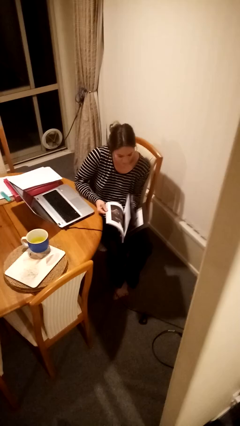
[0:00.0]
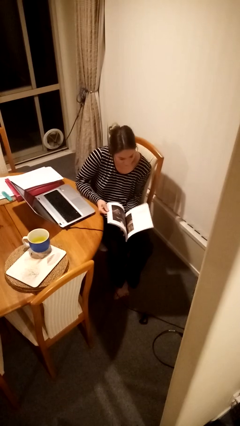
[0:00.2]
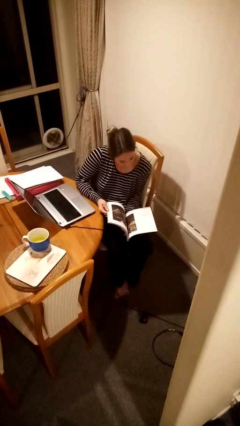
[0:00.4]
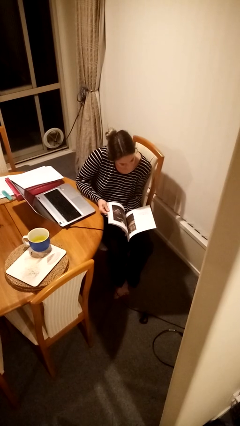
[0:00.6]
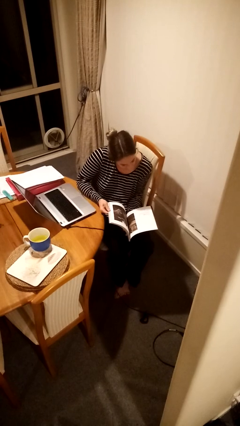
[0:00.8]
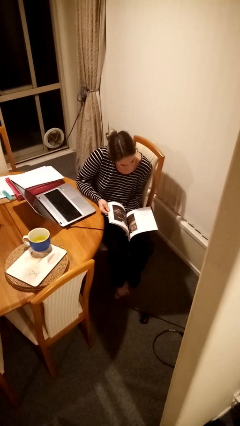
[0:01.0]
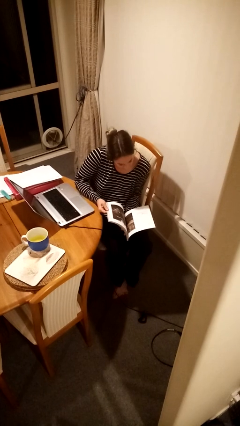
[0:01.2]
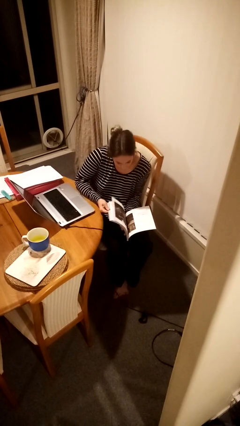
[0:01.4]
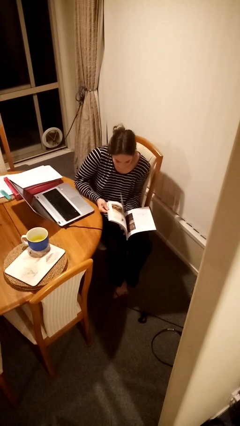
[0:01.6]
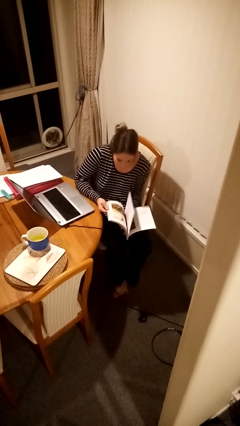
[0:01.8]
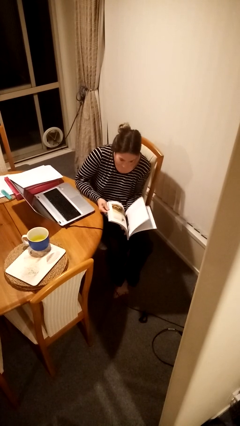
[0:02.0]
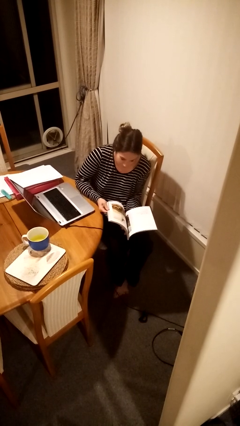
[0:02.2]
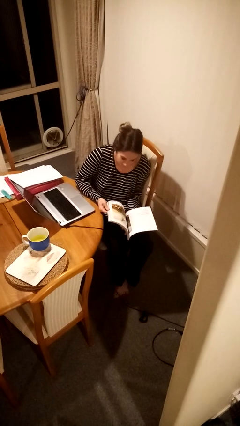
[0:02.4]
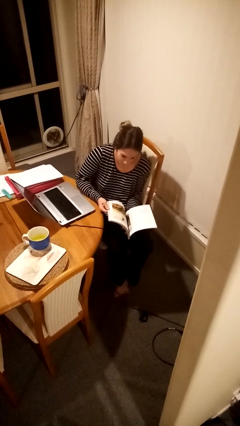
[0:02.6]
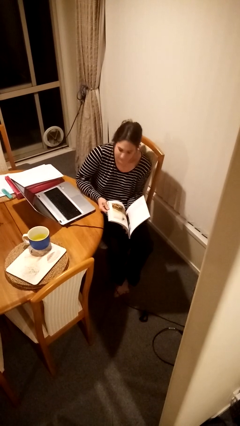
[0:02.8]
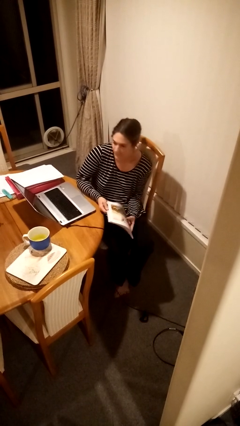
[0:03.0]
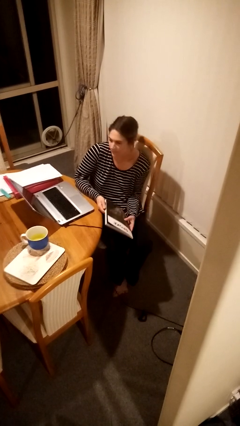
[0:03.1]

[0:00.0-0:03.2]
person reads magazine

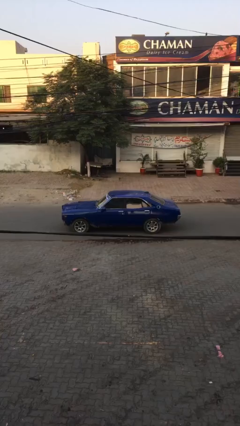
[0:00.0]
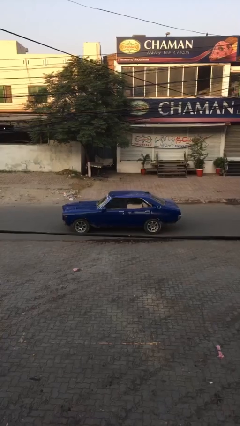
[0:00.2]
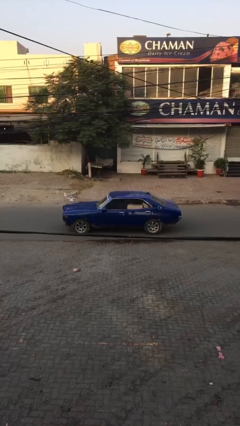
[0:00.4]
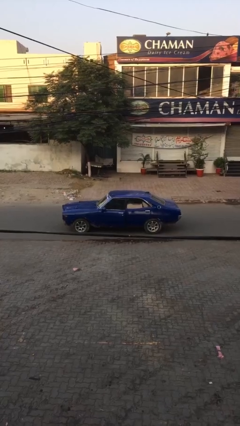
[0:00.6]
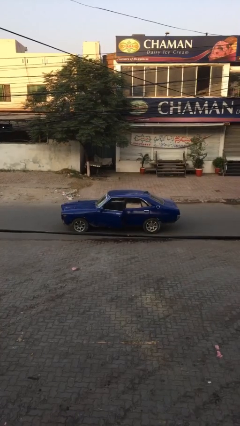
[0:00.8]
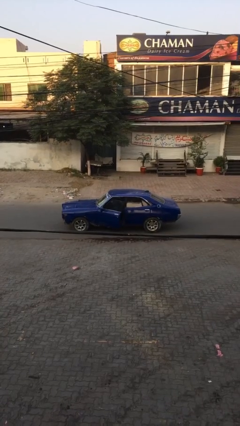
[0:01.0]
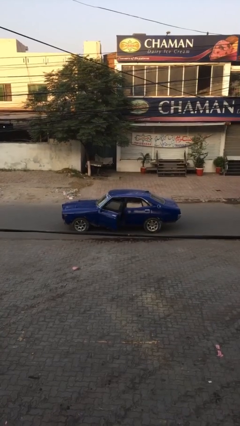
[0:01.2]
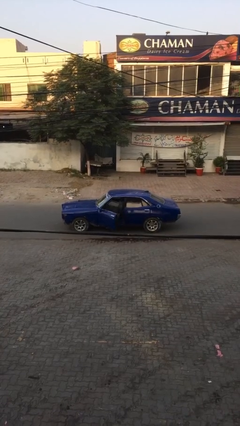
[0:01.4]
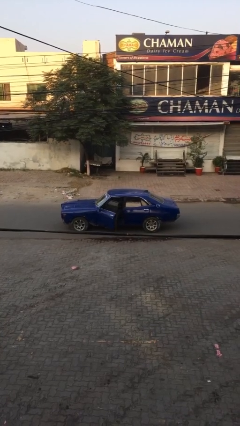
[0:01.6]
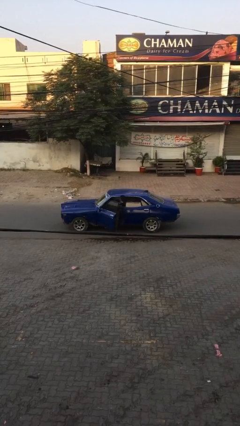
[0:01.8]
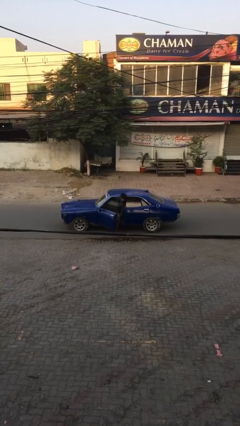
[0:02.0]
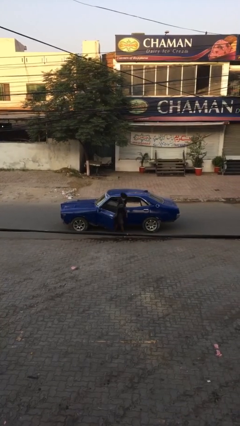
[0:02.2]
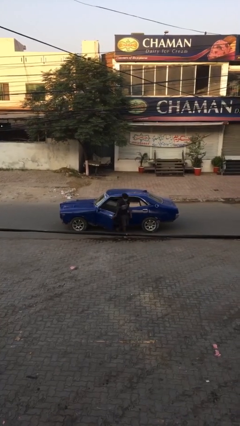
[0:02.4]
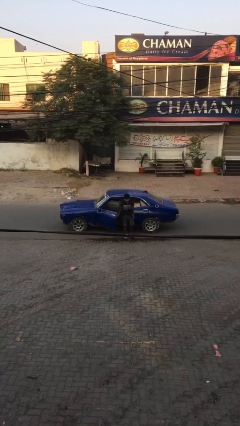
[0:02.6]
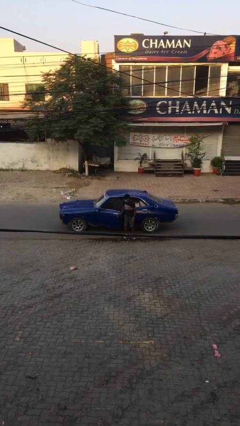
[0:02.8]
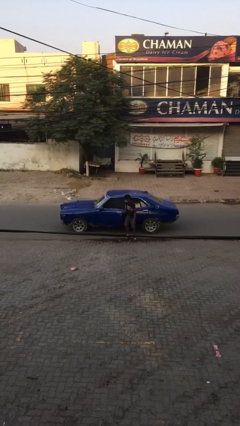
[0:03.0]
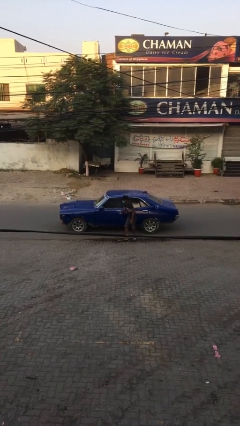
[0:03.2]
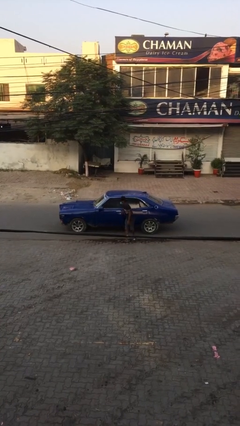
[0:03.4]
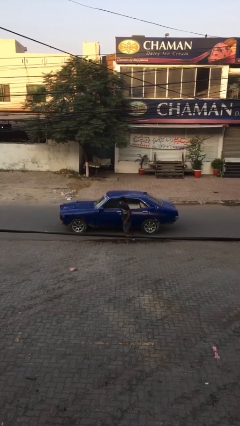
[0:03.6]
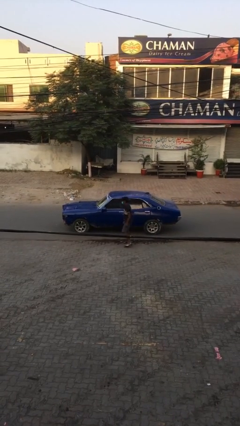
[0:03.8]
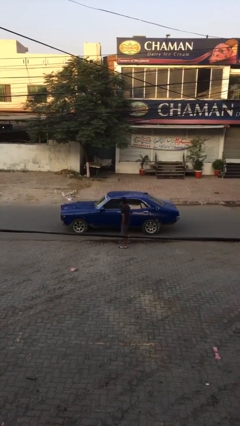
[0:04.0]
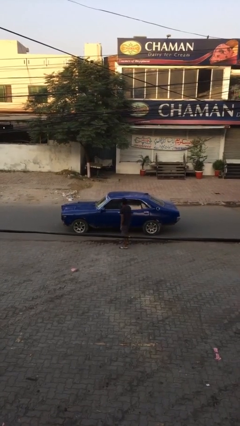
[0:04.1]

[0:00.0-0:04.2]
car drops off person

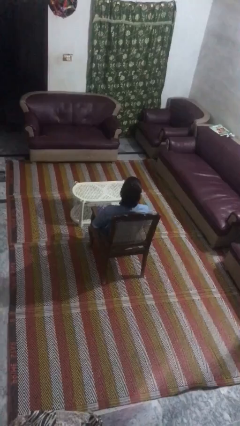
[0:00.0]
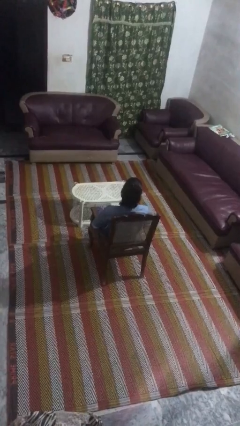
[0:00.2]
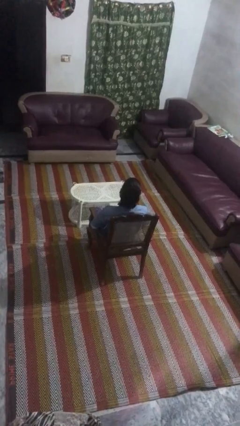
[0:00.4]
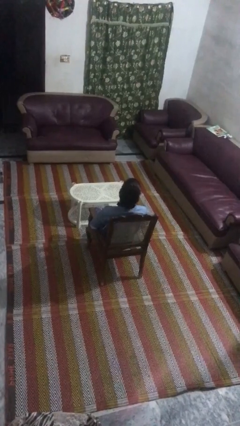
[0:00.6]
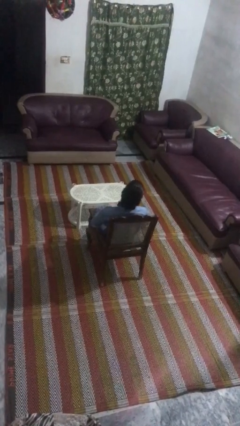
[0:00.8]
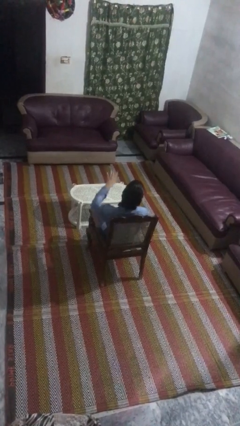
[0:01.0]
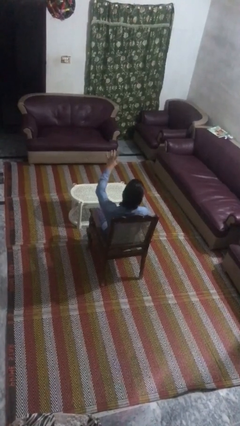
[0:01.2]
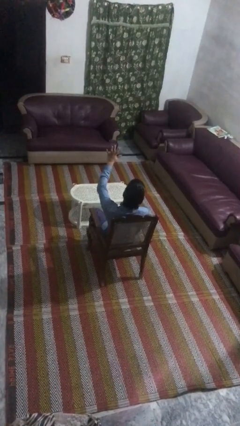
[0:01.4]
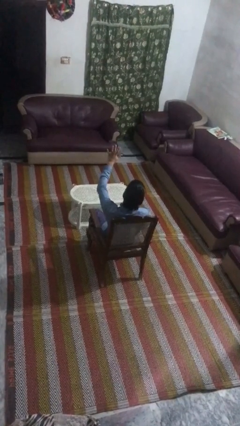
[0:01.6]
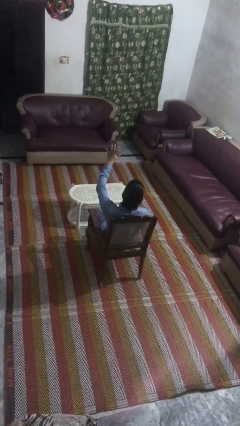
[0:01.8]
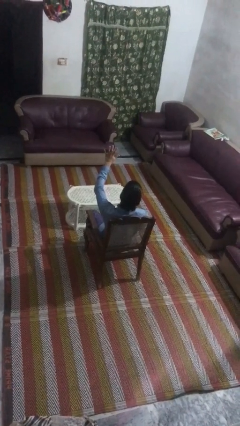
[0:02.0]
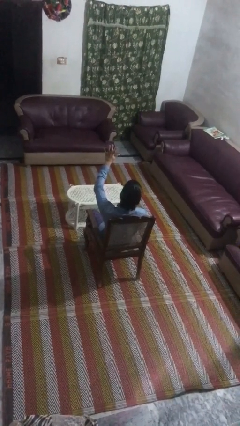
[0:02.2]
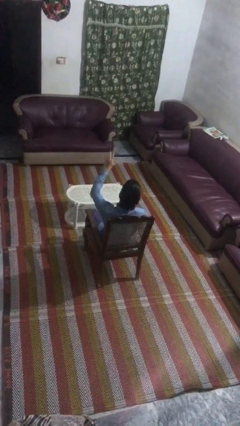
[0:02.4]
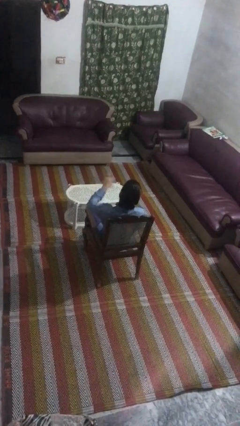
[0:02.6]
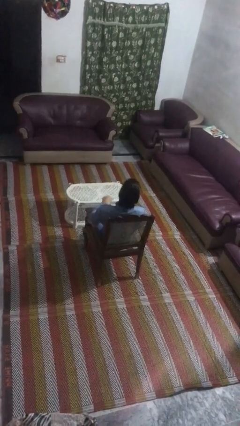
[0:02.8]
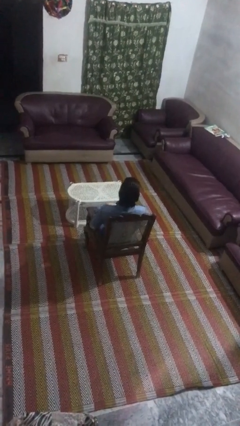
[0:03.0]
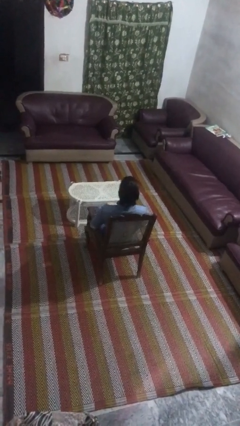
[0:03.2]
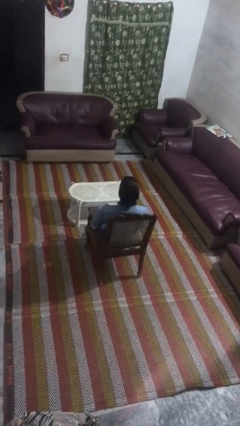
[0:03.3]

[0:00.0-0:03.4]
person gestures number five

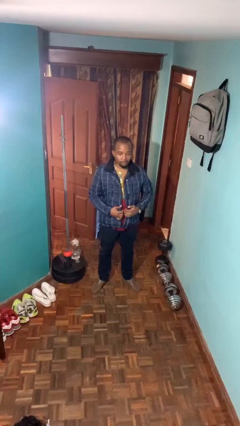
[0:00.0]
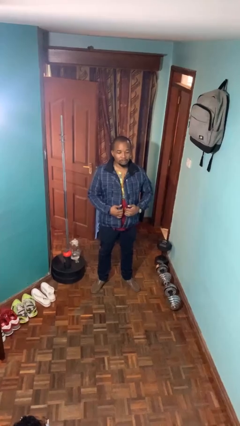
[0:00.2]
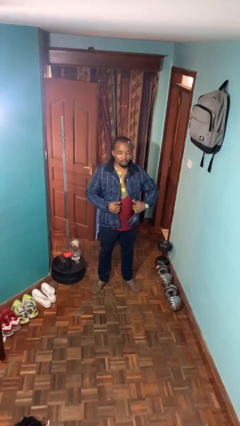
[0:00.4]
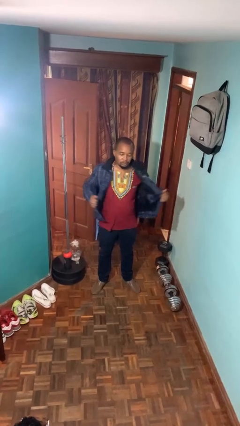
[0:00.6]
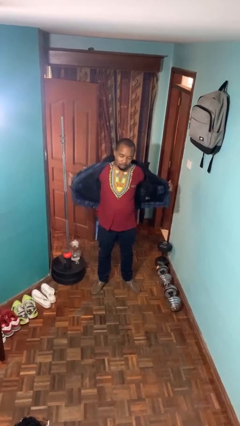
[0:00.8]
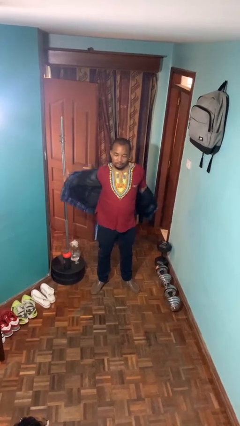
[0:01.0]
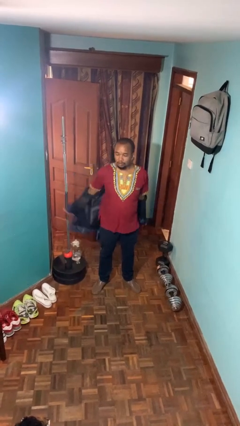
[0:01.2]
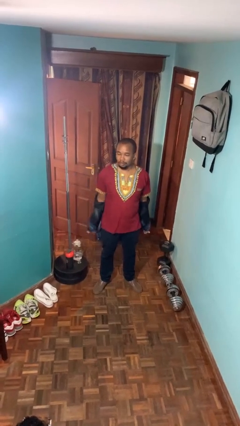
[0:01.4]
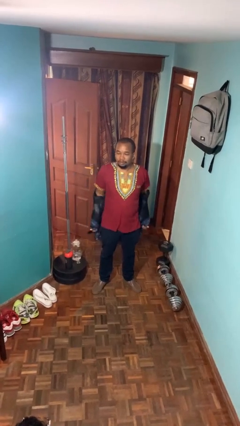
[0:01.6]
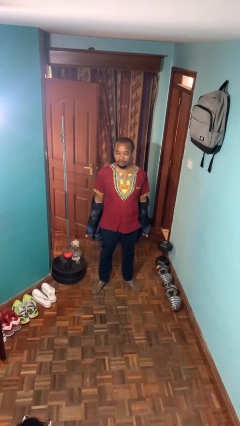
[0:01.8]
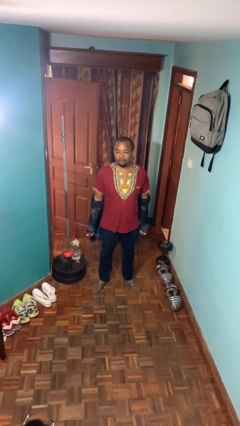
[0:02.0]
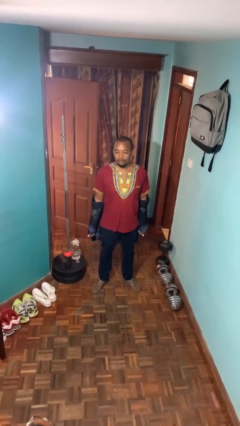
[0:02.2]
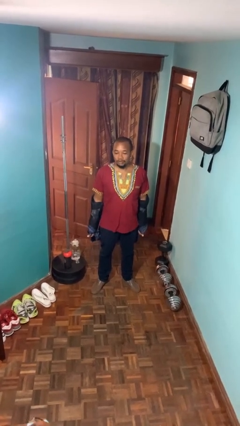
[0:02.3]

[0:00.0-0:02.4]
person takes off jacket

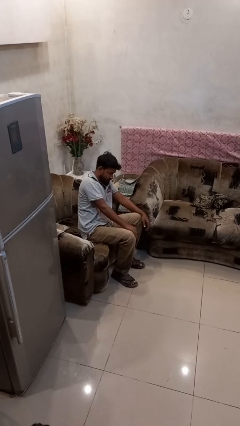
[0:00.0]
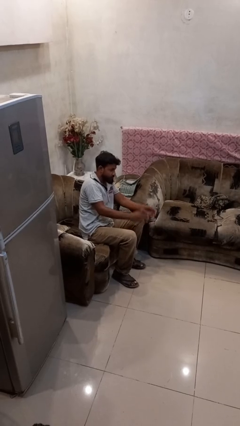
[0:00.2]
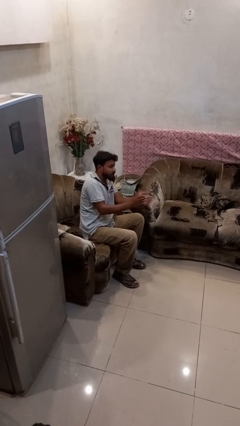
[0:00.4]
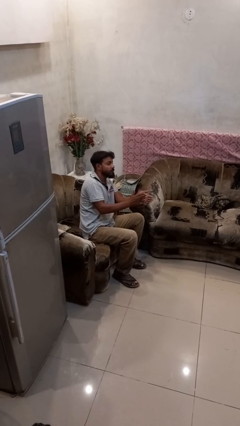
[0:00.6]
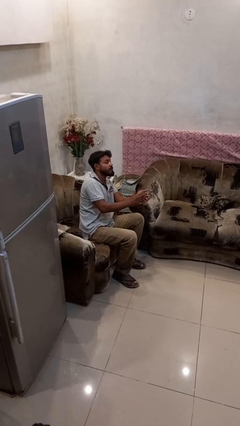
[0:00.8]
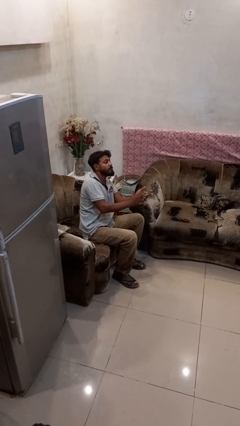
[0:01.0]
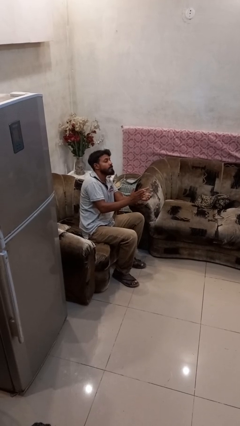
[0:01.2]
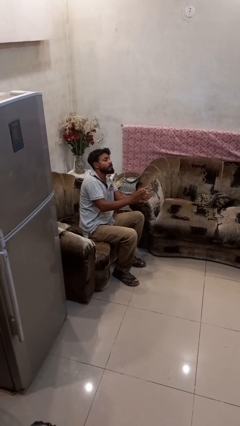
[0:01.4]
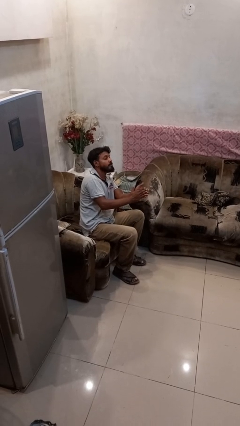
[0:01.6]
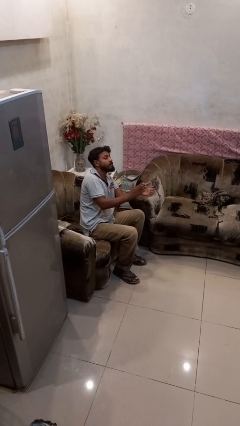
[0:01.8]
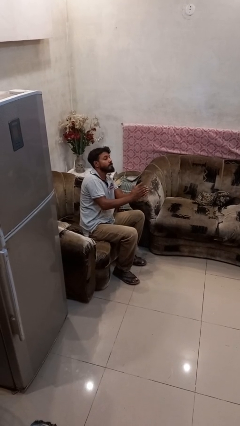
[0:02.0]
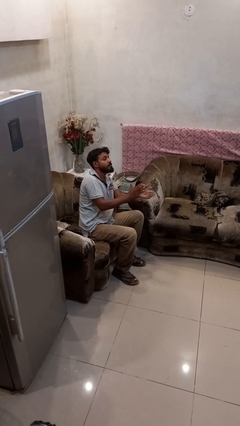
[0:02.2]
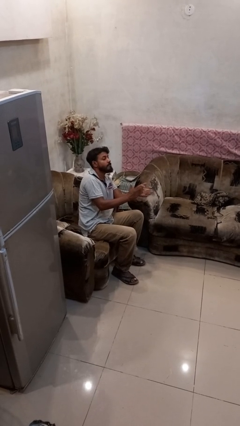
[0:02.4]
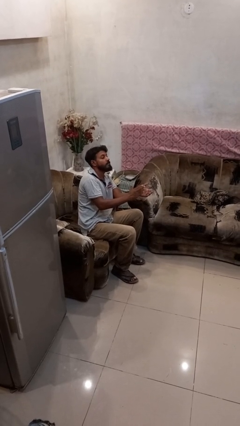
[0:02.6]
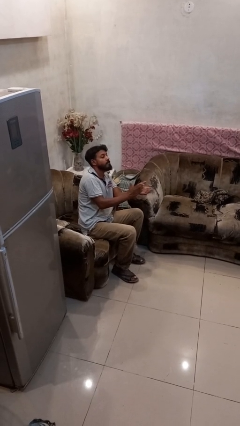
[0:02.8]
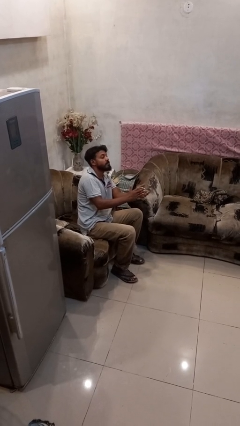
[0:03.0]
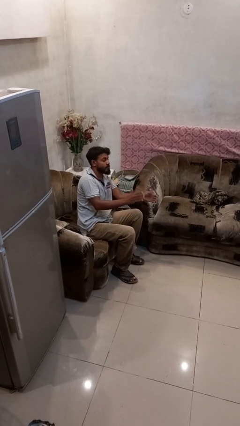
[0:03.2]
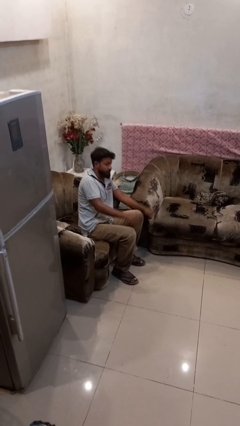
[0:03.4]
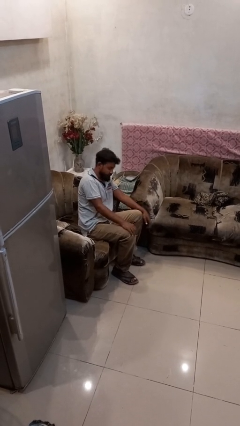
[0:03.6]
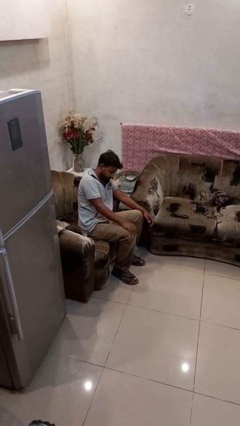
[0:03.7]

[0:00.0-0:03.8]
person claps hands

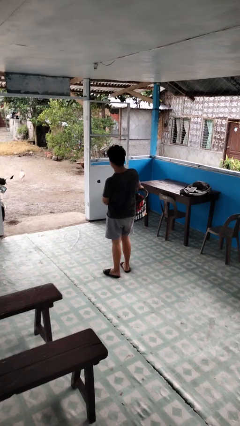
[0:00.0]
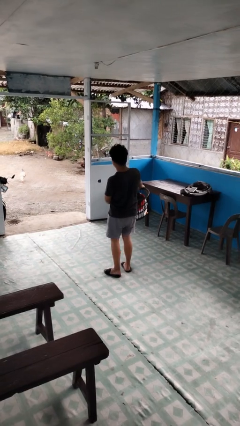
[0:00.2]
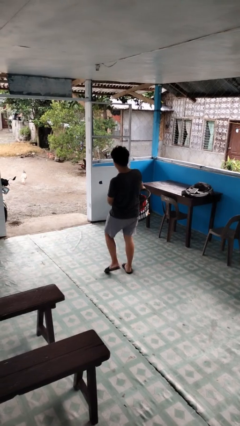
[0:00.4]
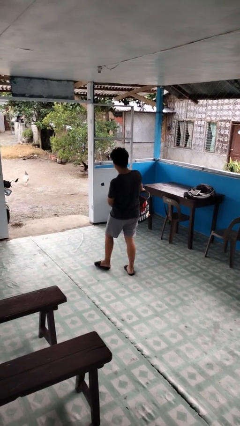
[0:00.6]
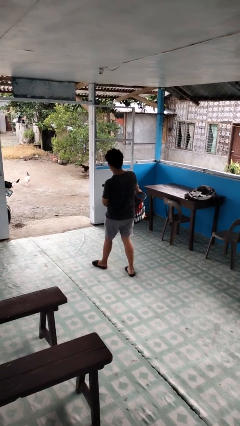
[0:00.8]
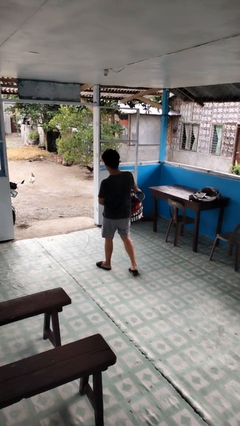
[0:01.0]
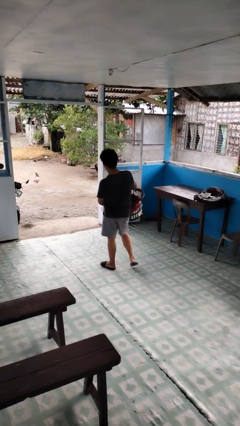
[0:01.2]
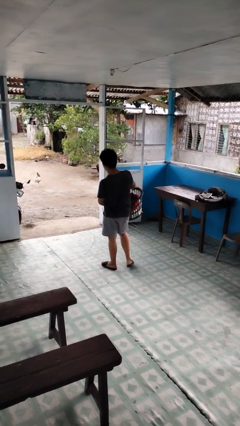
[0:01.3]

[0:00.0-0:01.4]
person carries laundry basket
